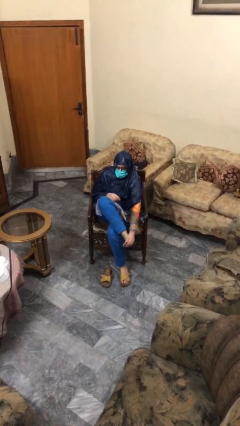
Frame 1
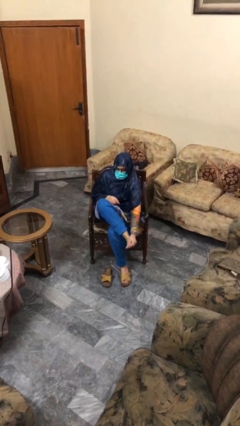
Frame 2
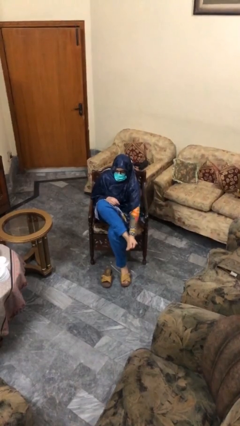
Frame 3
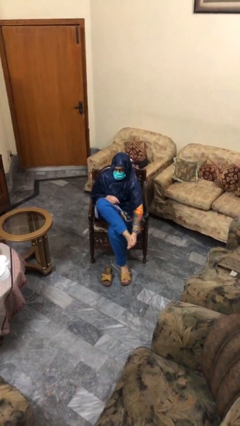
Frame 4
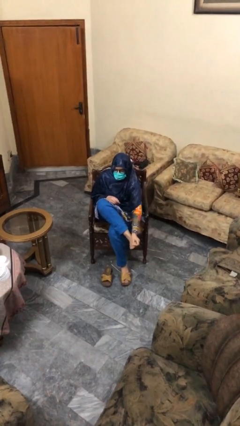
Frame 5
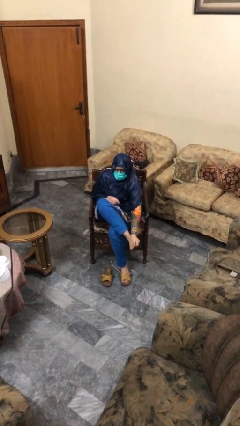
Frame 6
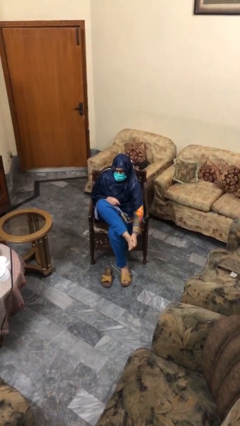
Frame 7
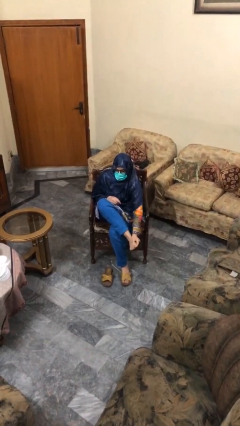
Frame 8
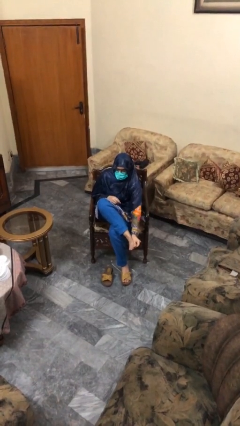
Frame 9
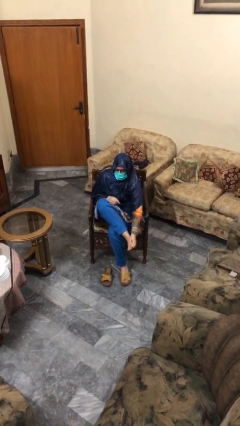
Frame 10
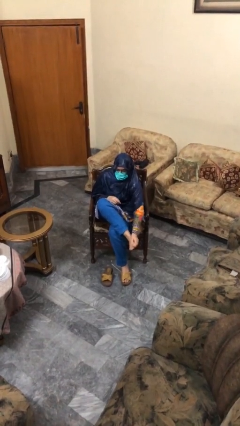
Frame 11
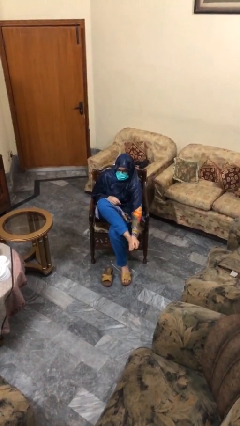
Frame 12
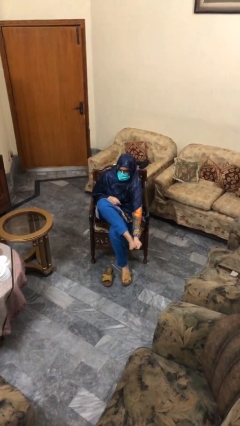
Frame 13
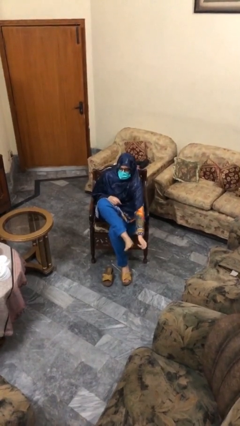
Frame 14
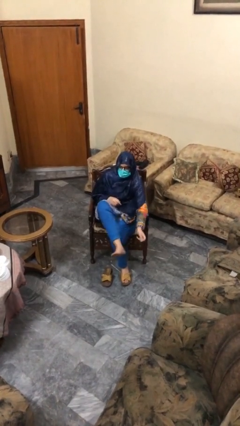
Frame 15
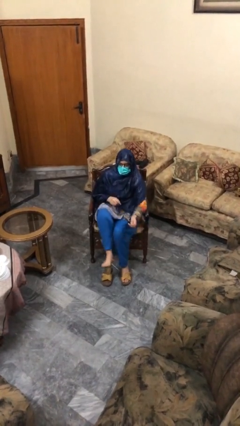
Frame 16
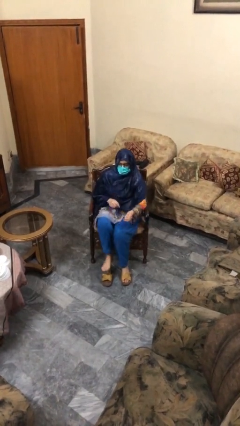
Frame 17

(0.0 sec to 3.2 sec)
person rubs foot

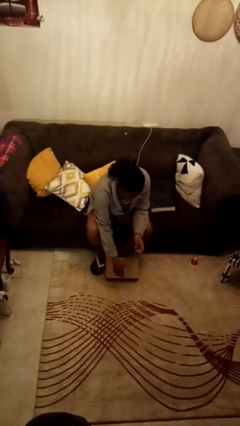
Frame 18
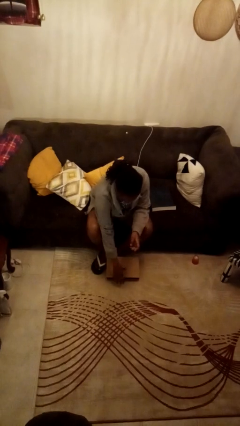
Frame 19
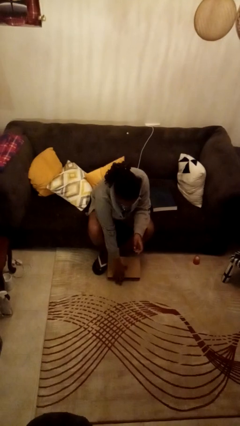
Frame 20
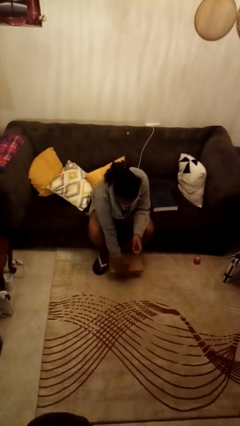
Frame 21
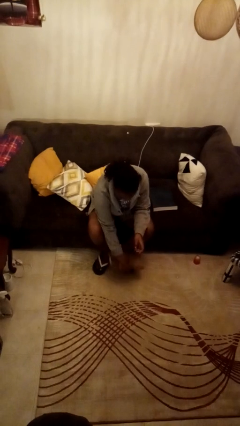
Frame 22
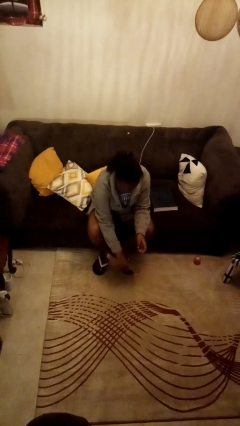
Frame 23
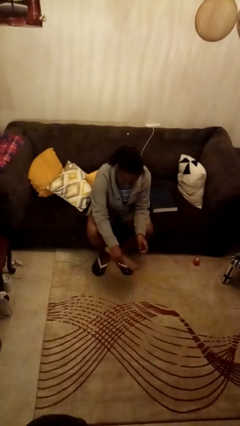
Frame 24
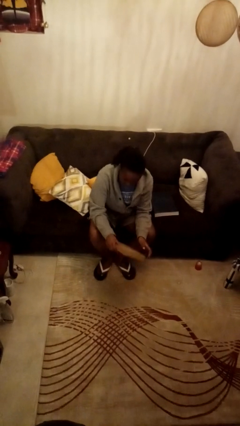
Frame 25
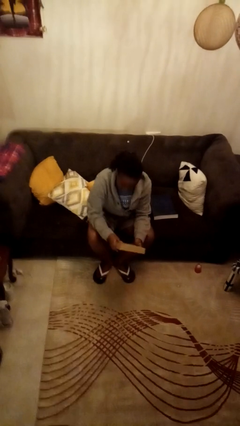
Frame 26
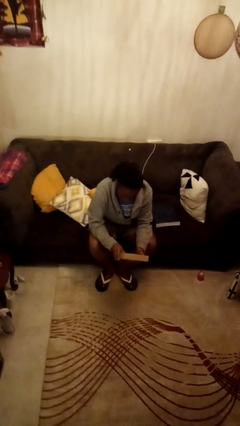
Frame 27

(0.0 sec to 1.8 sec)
person picks up object from floor

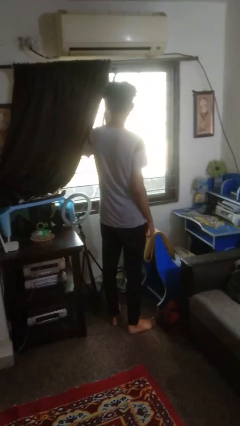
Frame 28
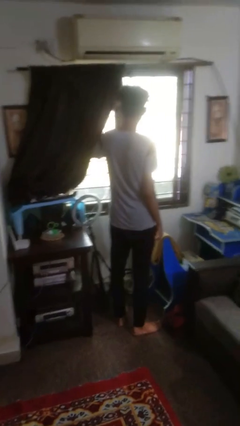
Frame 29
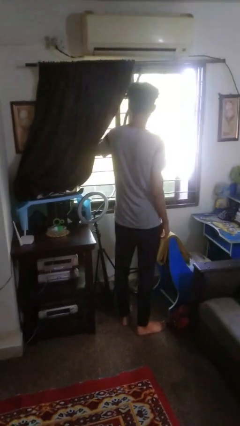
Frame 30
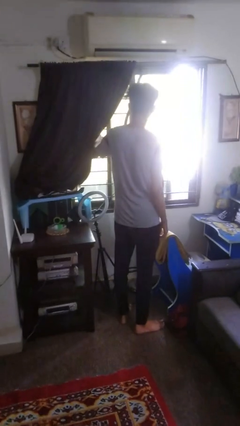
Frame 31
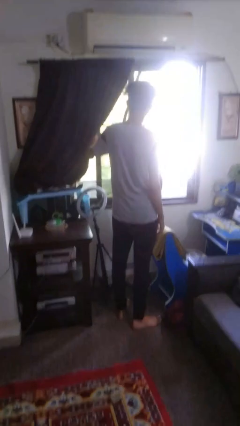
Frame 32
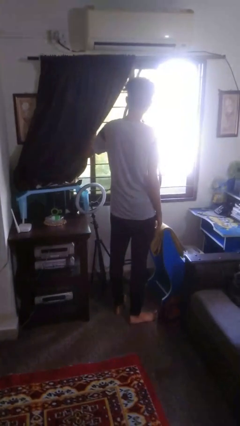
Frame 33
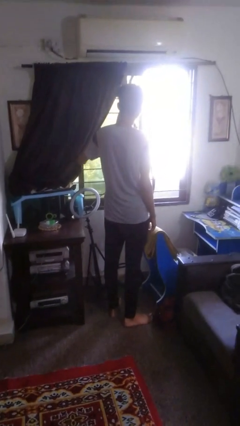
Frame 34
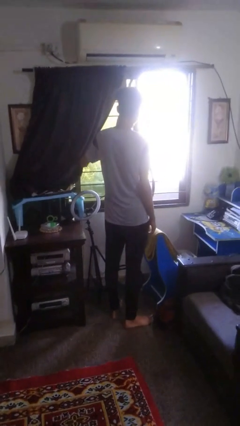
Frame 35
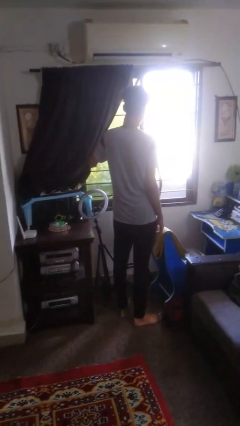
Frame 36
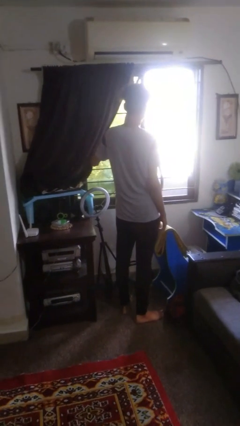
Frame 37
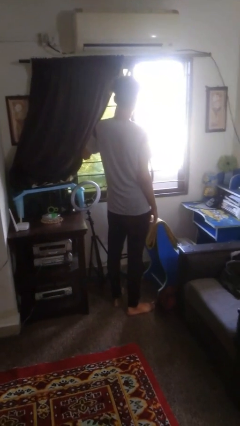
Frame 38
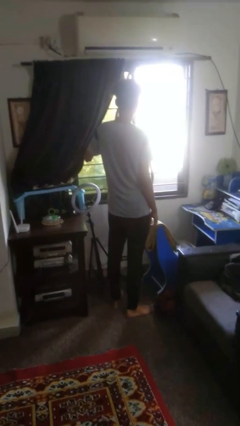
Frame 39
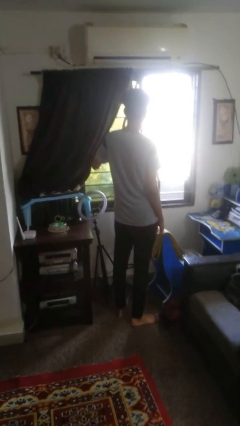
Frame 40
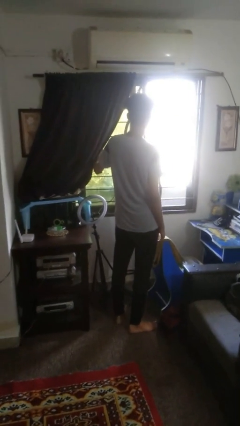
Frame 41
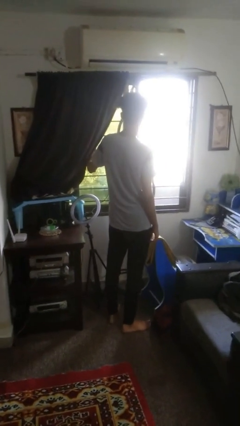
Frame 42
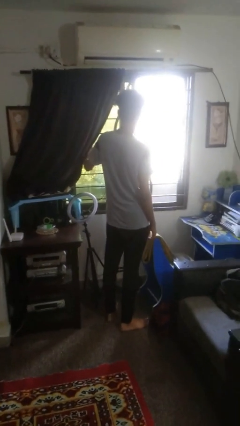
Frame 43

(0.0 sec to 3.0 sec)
person opens home window

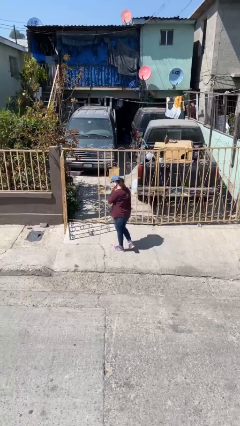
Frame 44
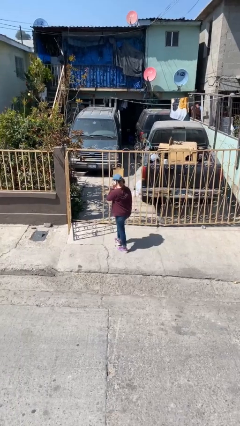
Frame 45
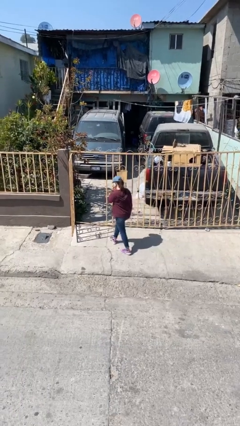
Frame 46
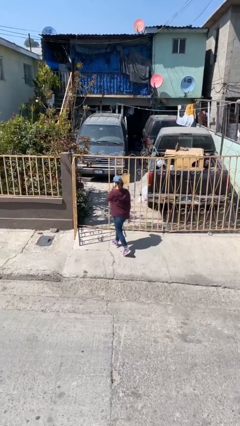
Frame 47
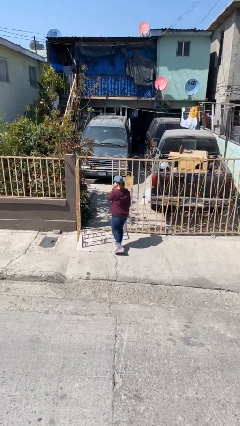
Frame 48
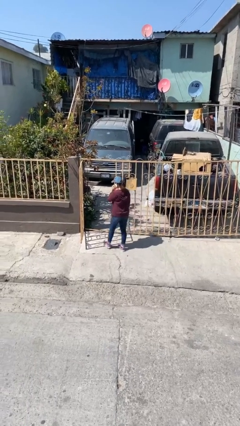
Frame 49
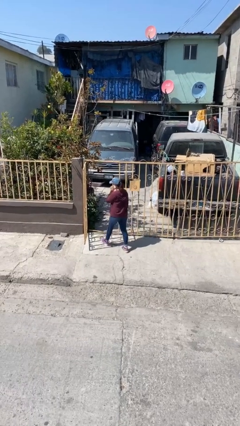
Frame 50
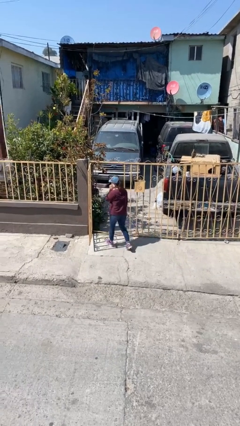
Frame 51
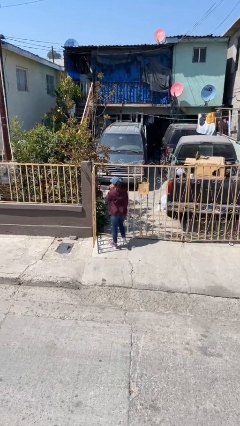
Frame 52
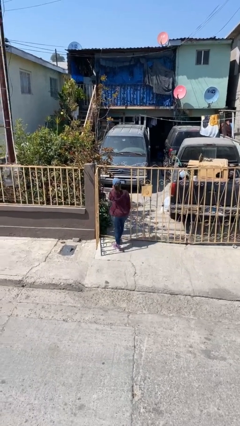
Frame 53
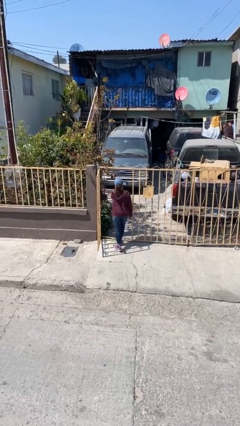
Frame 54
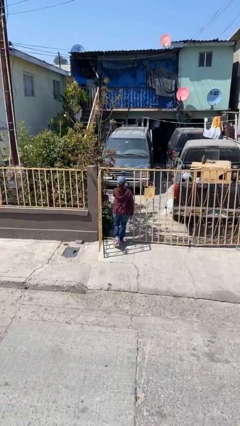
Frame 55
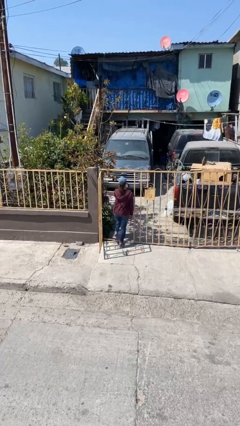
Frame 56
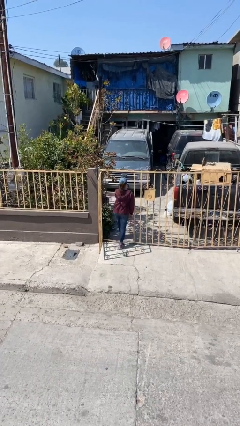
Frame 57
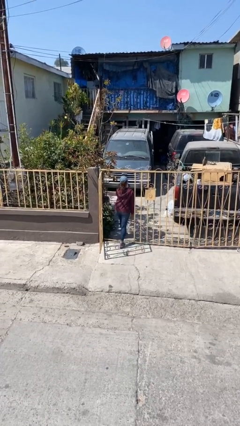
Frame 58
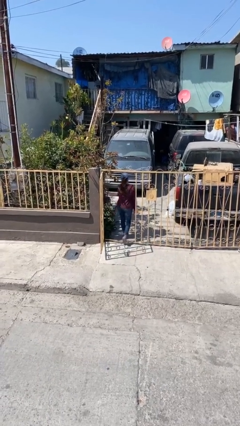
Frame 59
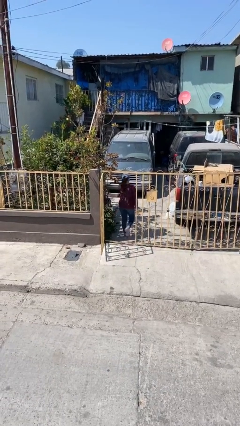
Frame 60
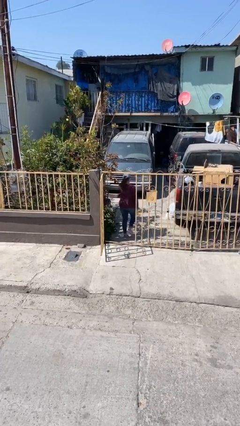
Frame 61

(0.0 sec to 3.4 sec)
person exits scene through structure

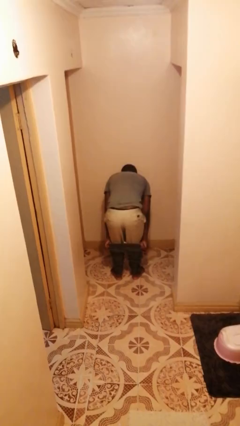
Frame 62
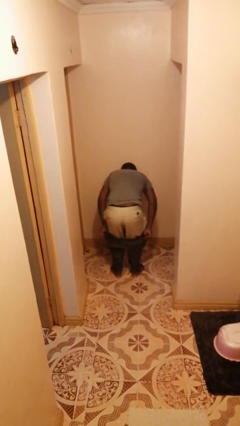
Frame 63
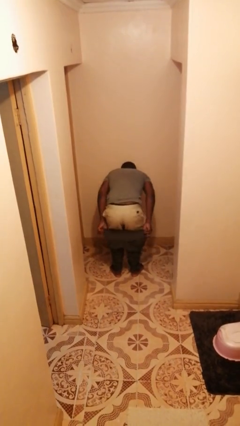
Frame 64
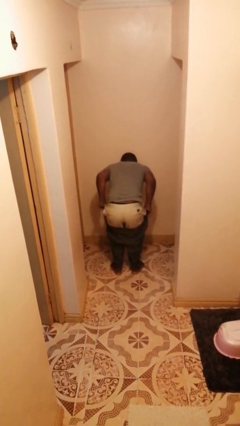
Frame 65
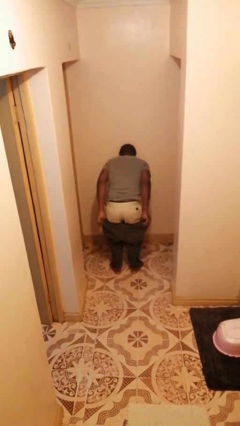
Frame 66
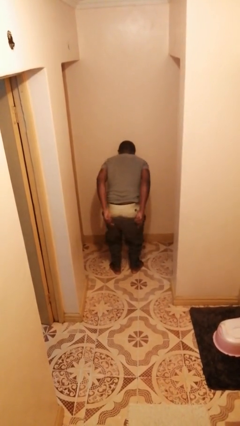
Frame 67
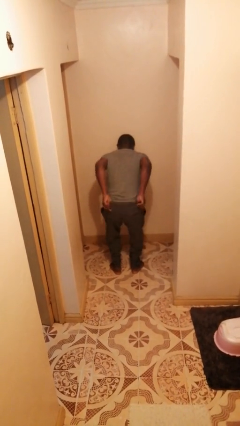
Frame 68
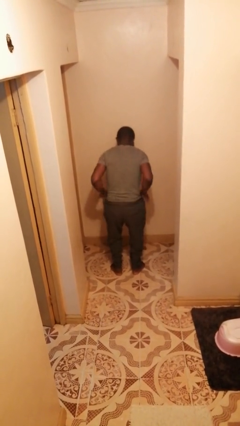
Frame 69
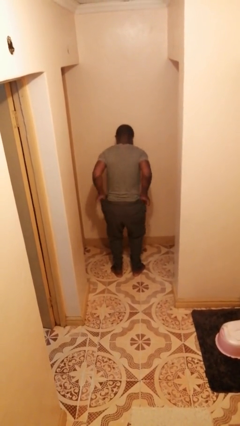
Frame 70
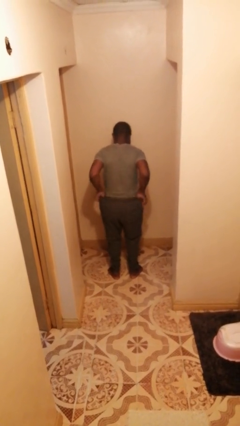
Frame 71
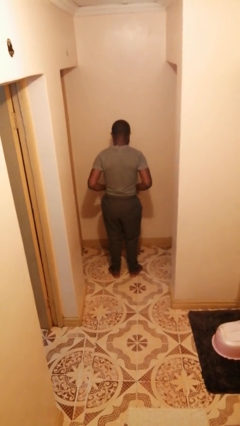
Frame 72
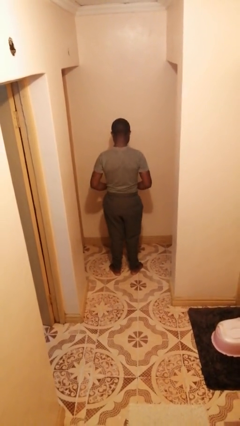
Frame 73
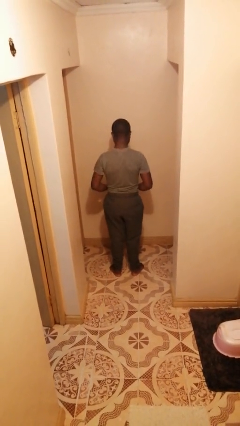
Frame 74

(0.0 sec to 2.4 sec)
person puts on pants

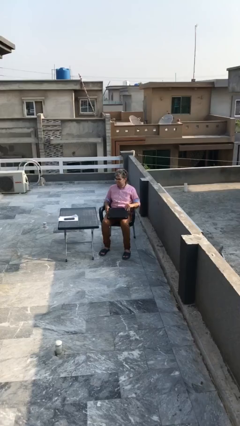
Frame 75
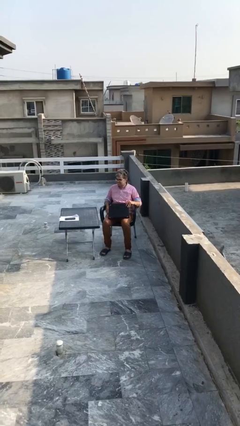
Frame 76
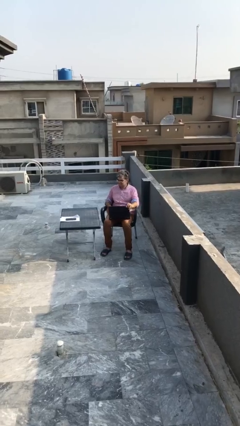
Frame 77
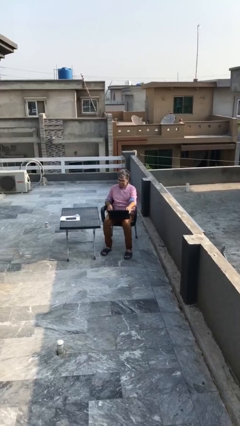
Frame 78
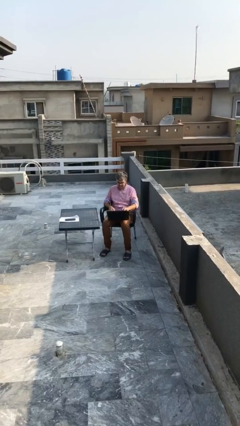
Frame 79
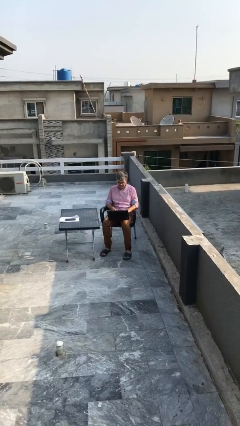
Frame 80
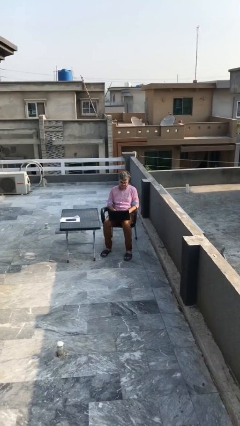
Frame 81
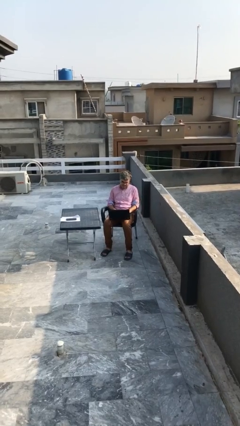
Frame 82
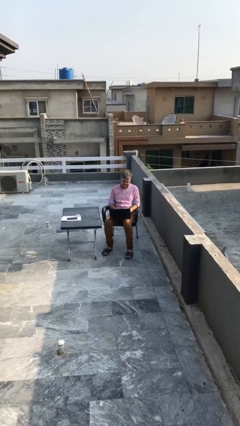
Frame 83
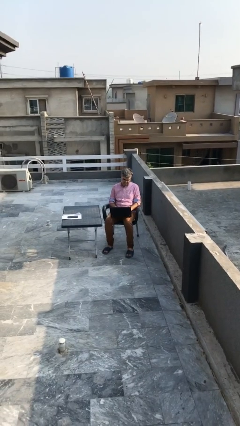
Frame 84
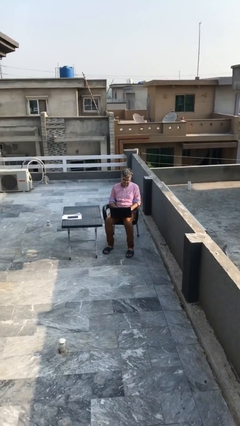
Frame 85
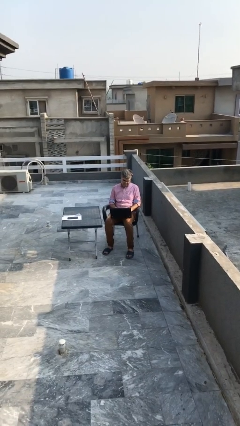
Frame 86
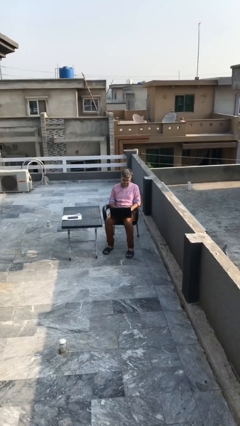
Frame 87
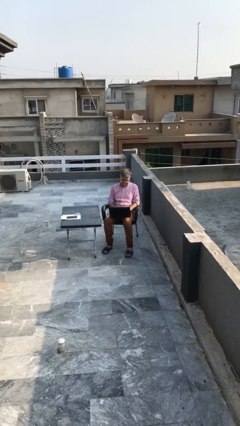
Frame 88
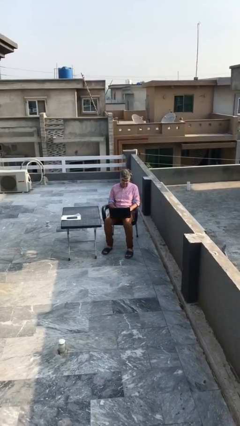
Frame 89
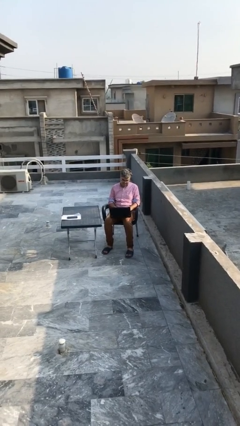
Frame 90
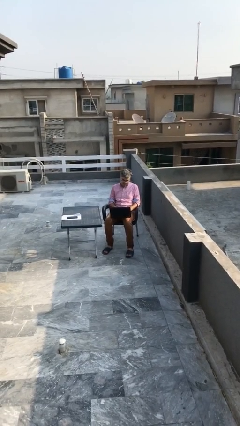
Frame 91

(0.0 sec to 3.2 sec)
person interacts with laptop
